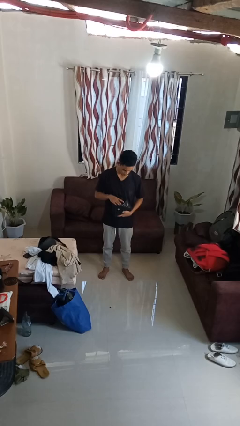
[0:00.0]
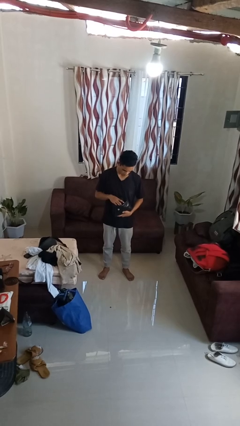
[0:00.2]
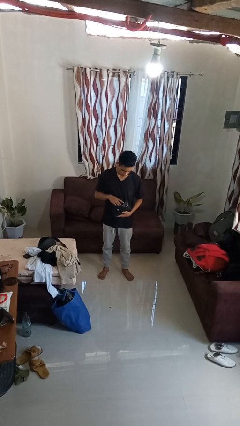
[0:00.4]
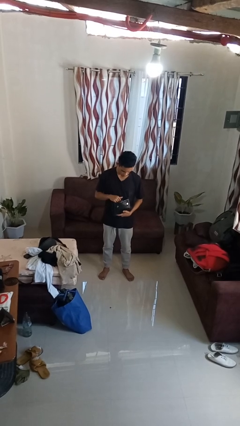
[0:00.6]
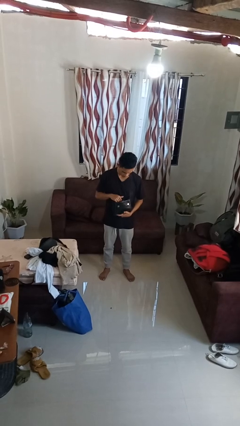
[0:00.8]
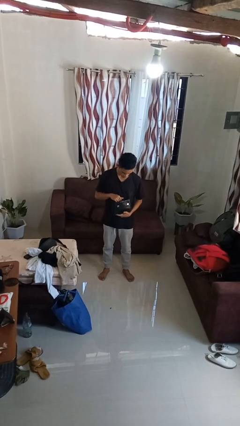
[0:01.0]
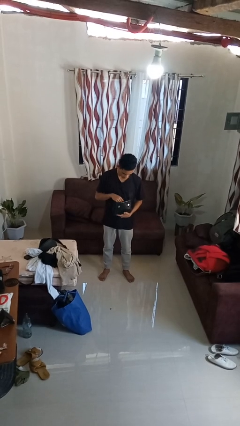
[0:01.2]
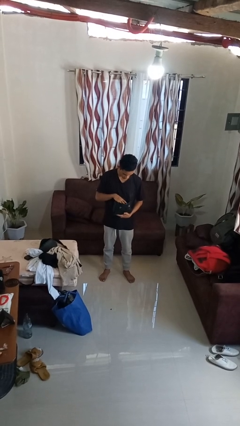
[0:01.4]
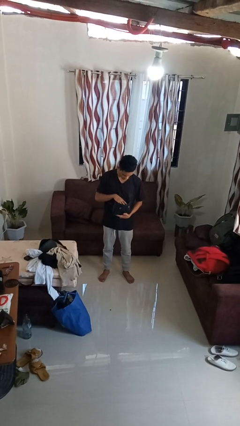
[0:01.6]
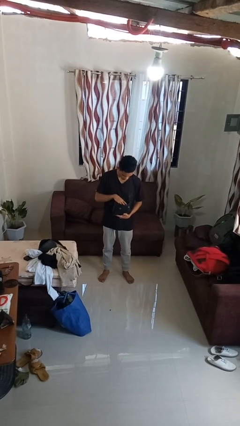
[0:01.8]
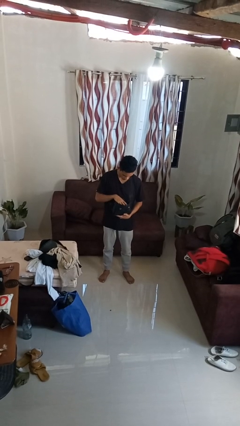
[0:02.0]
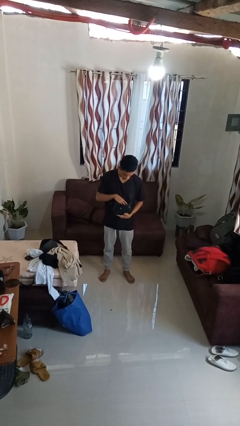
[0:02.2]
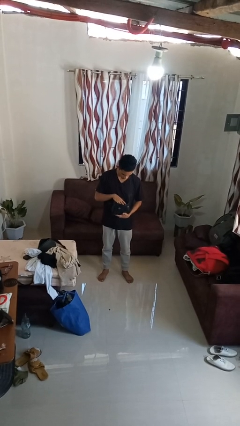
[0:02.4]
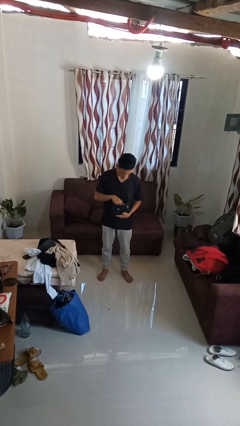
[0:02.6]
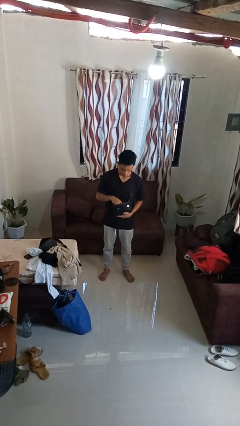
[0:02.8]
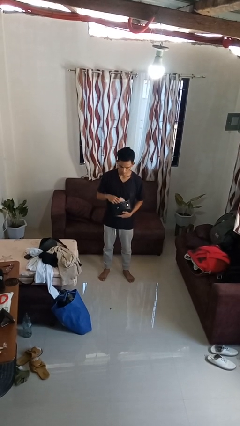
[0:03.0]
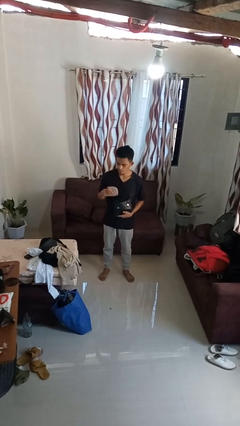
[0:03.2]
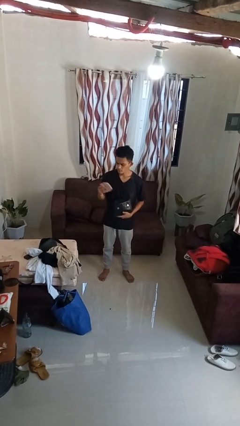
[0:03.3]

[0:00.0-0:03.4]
person searches in purse

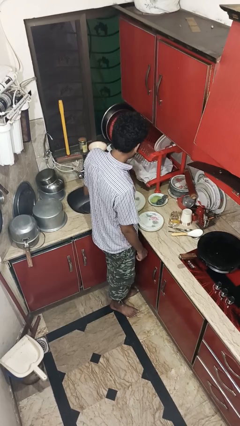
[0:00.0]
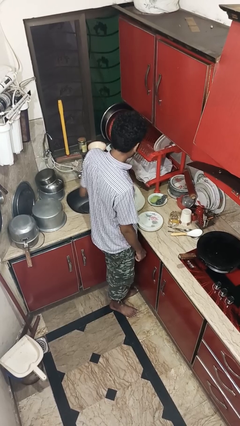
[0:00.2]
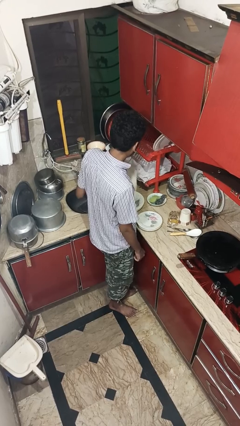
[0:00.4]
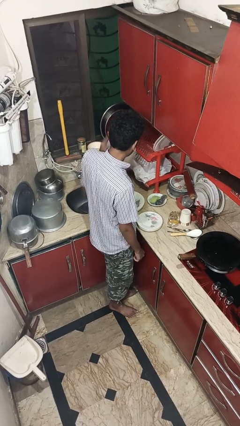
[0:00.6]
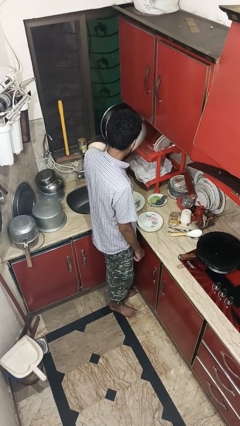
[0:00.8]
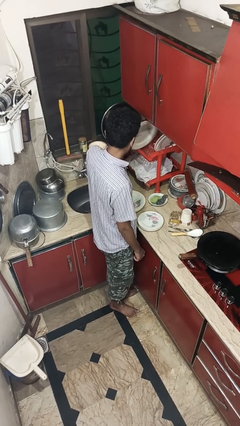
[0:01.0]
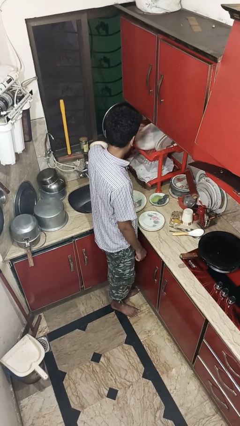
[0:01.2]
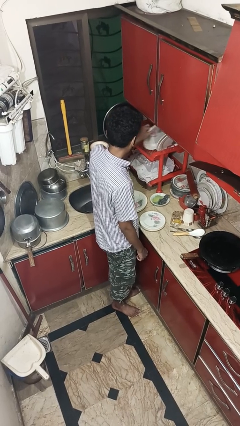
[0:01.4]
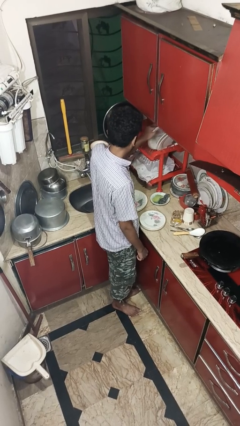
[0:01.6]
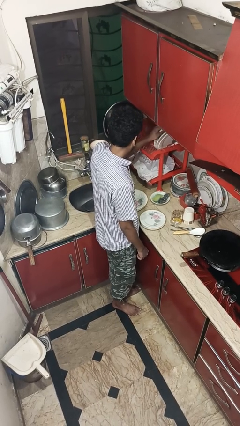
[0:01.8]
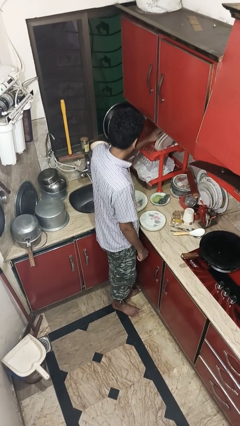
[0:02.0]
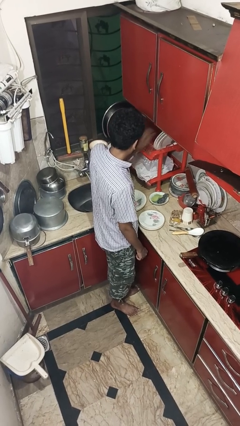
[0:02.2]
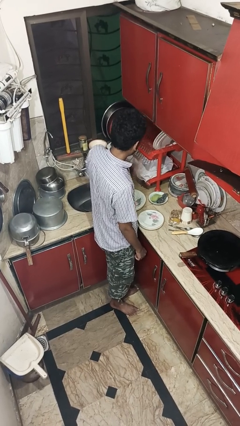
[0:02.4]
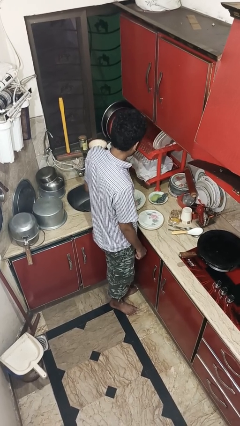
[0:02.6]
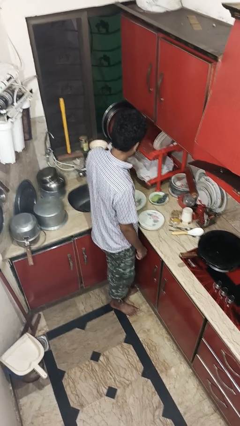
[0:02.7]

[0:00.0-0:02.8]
person loads dishwasher

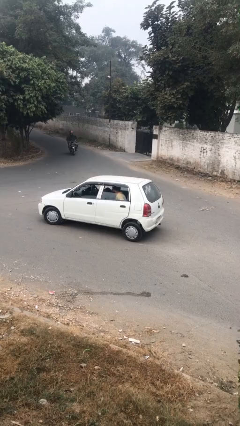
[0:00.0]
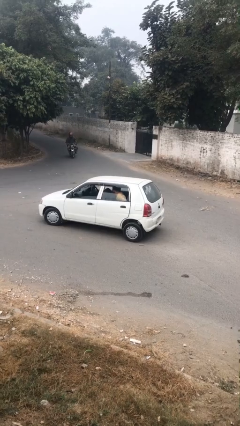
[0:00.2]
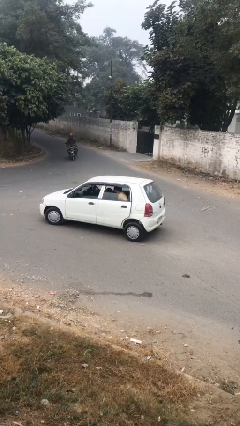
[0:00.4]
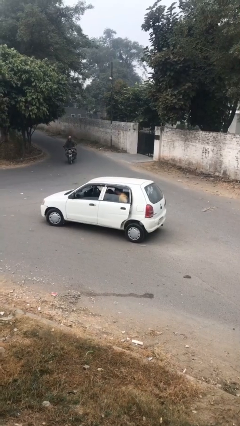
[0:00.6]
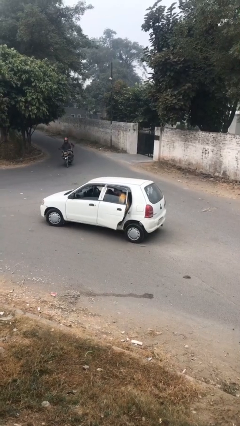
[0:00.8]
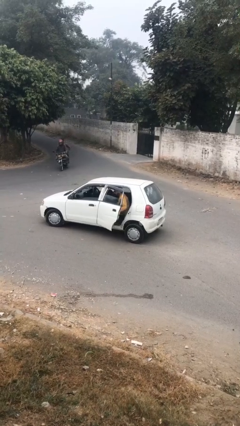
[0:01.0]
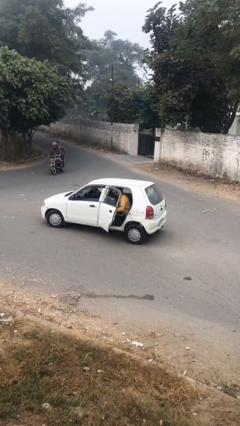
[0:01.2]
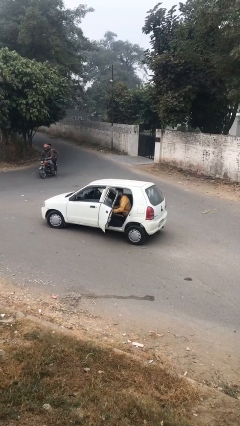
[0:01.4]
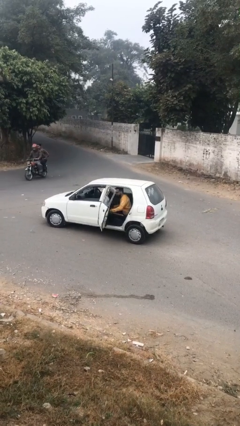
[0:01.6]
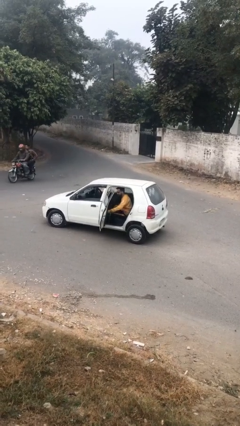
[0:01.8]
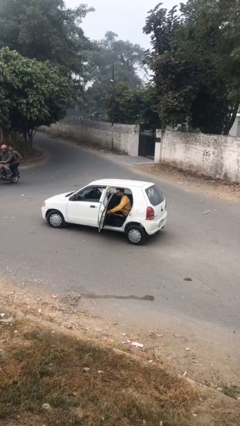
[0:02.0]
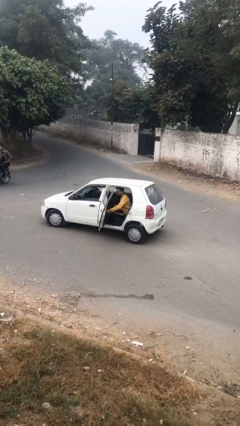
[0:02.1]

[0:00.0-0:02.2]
person opens car door

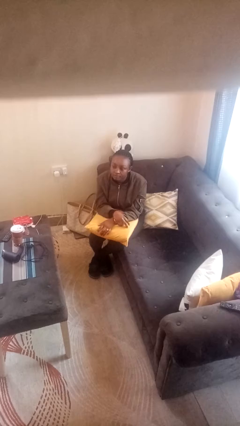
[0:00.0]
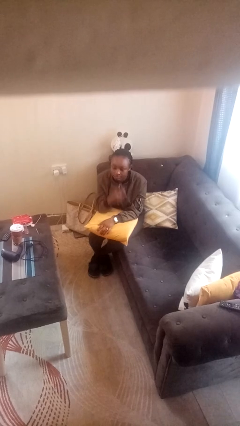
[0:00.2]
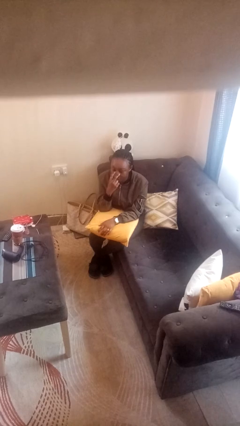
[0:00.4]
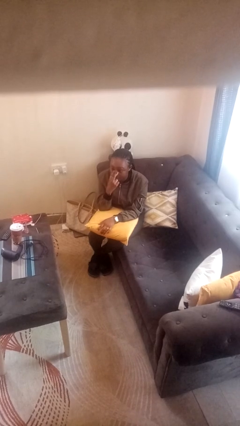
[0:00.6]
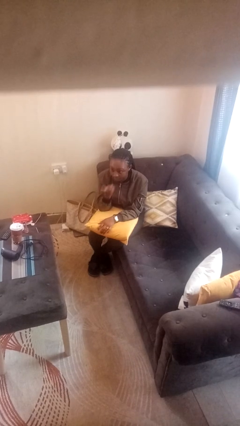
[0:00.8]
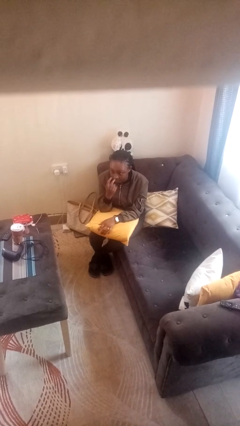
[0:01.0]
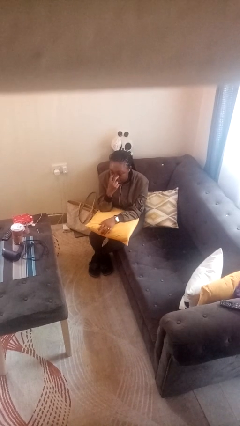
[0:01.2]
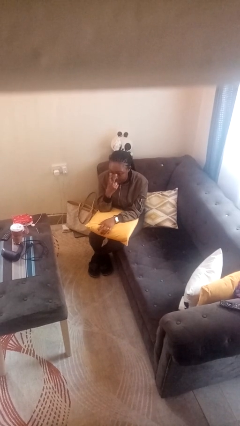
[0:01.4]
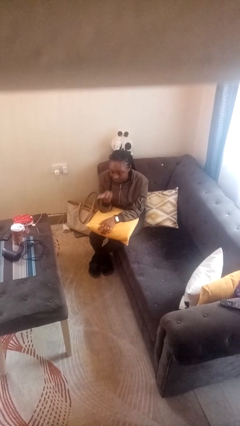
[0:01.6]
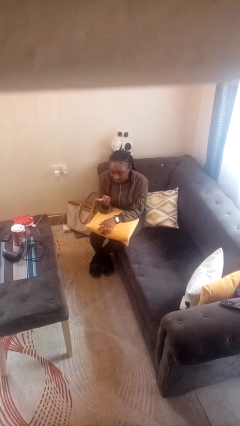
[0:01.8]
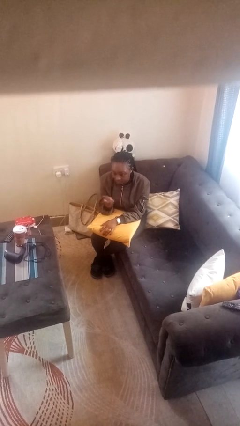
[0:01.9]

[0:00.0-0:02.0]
person gestures watch closely

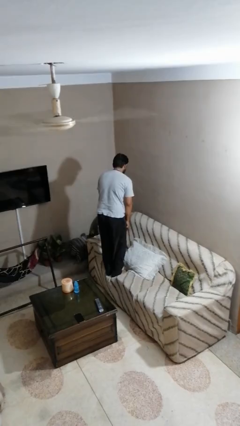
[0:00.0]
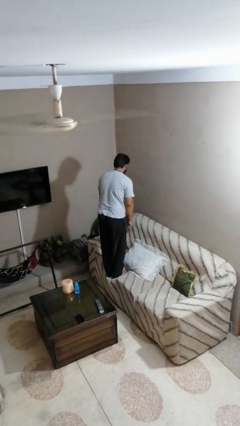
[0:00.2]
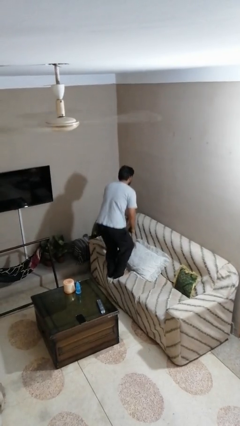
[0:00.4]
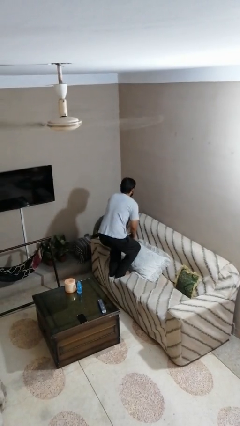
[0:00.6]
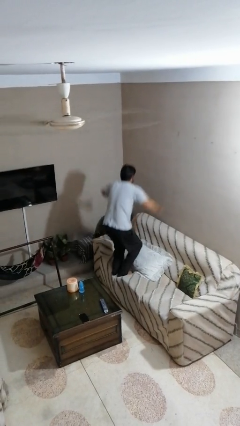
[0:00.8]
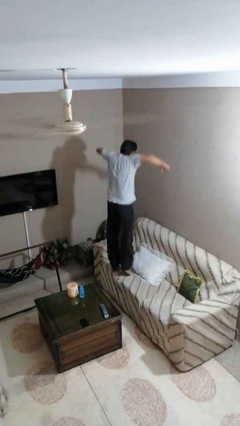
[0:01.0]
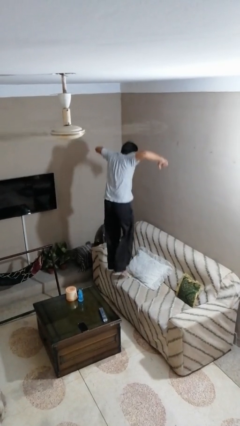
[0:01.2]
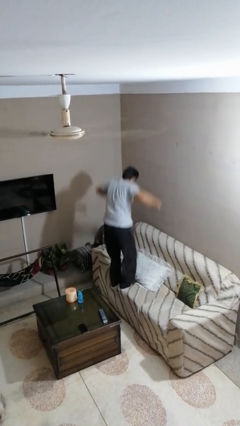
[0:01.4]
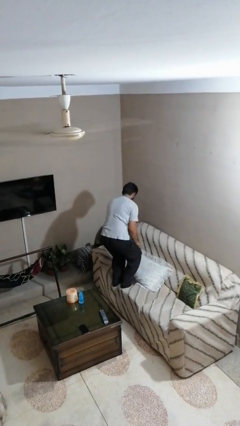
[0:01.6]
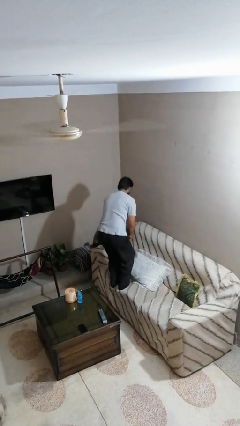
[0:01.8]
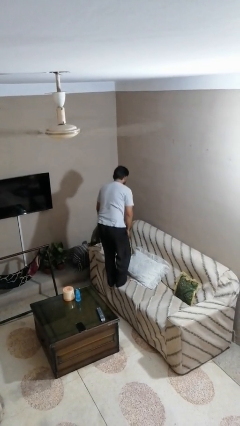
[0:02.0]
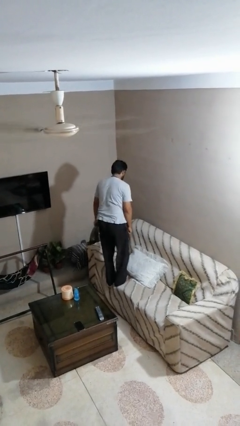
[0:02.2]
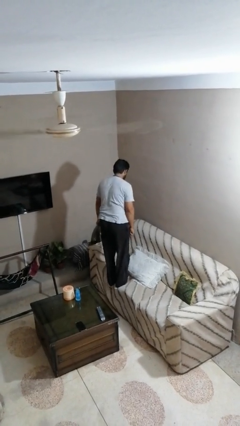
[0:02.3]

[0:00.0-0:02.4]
person jumps on couch

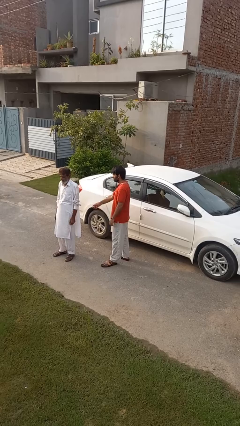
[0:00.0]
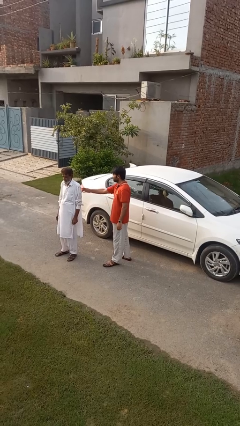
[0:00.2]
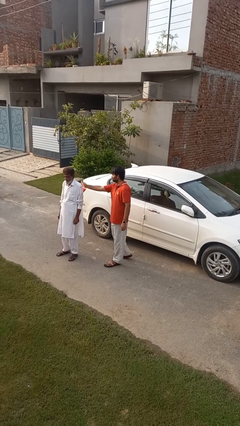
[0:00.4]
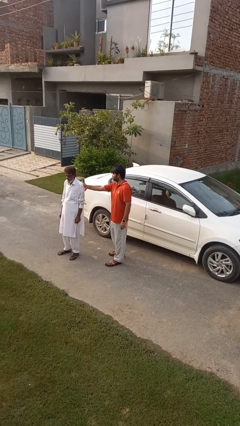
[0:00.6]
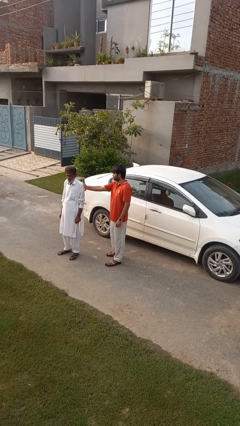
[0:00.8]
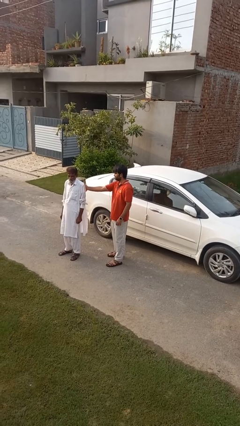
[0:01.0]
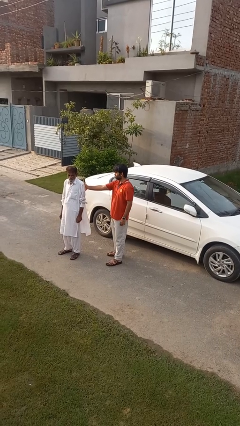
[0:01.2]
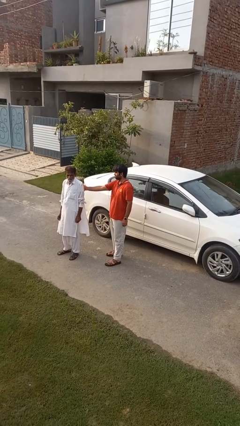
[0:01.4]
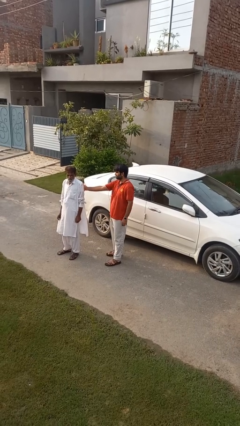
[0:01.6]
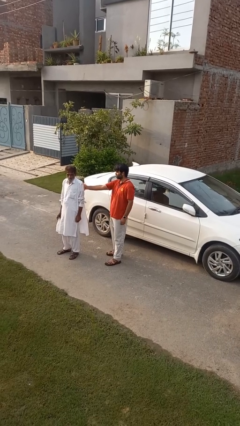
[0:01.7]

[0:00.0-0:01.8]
person touches back of person

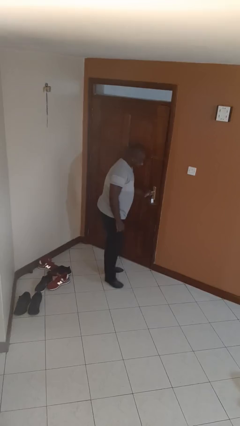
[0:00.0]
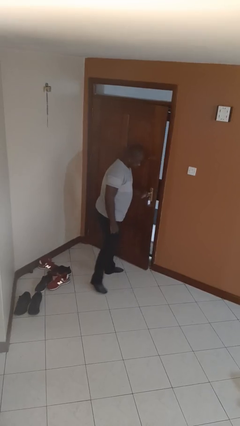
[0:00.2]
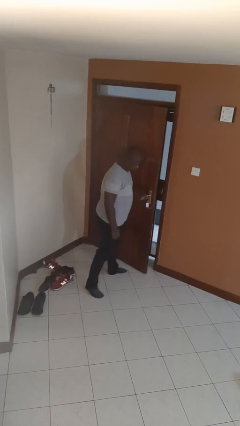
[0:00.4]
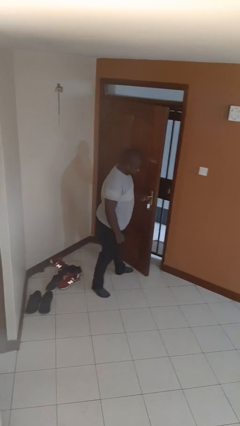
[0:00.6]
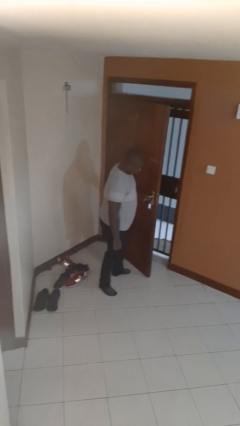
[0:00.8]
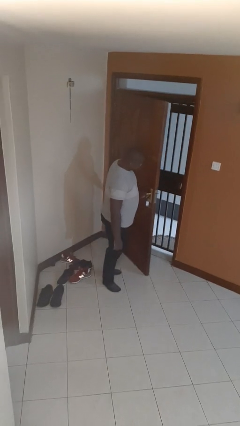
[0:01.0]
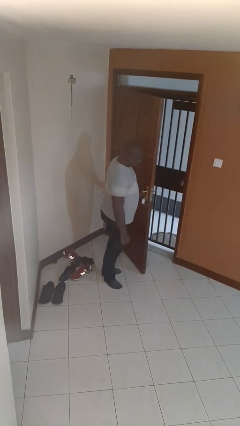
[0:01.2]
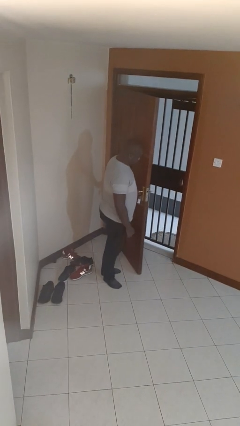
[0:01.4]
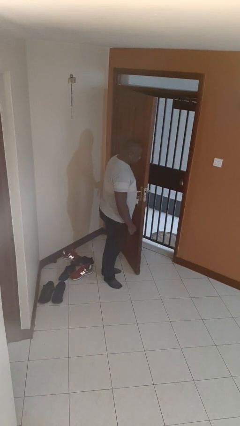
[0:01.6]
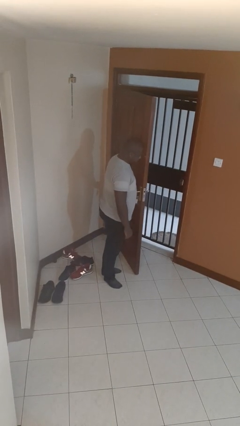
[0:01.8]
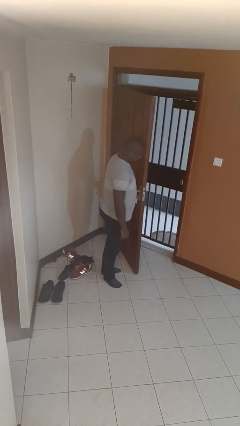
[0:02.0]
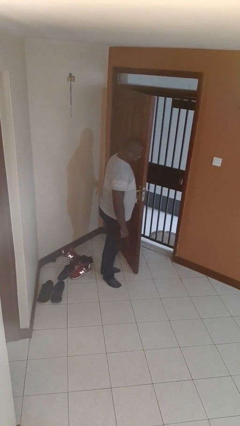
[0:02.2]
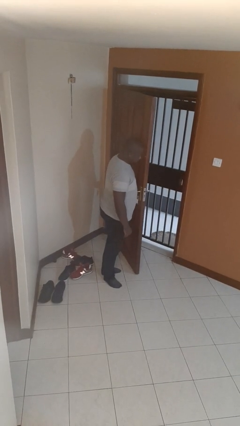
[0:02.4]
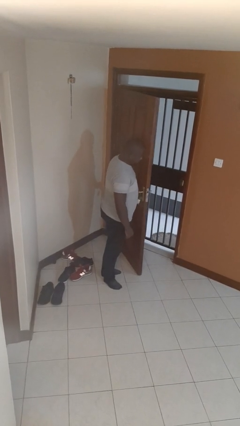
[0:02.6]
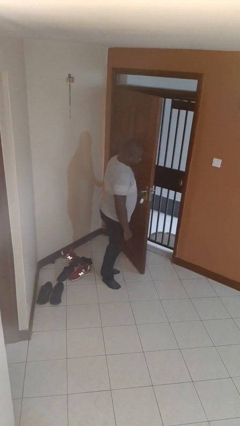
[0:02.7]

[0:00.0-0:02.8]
person opens facility door
